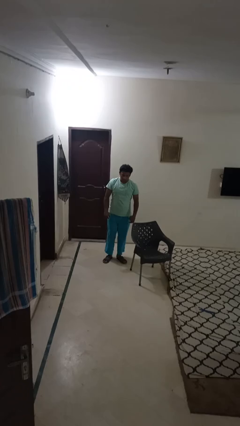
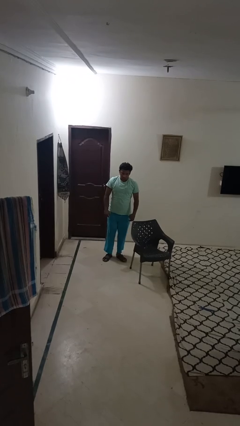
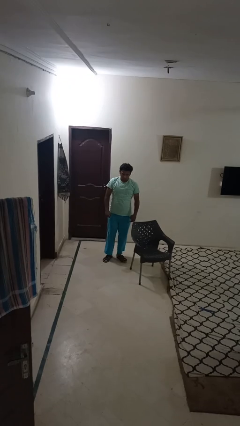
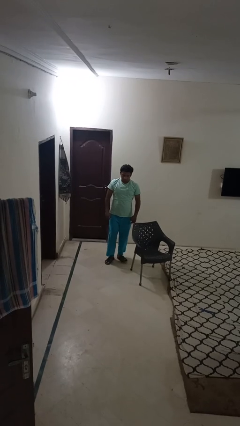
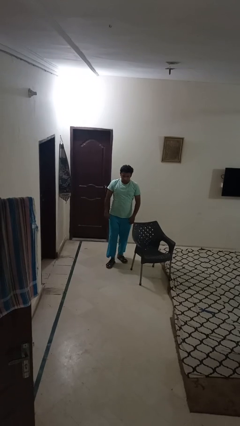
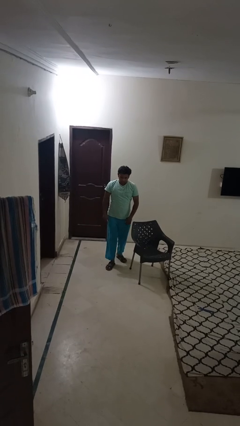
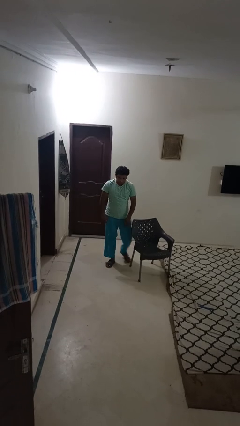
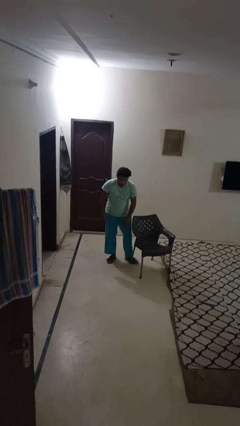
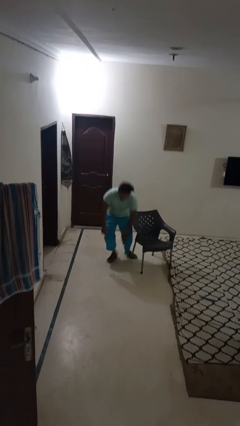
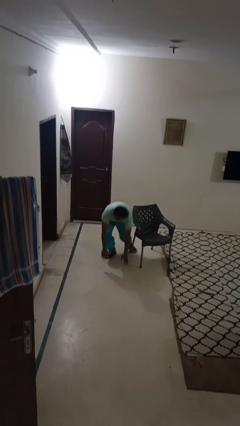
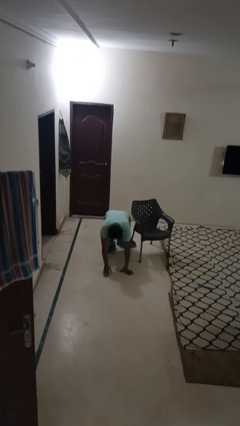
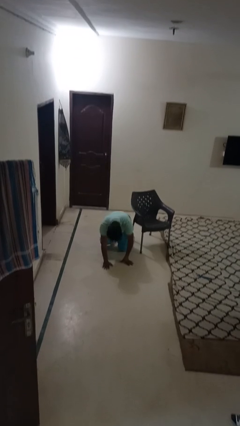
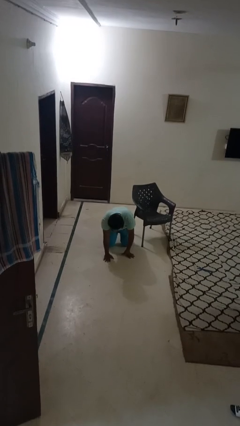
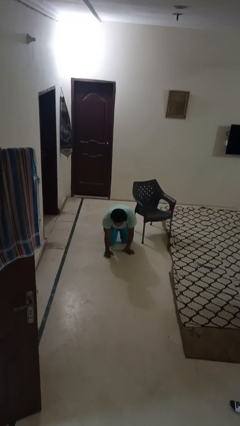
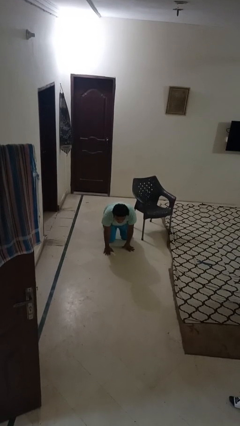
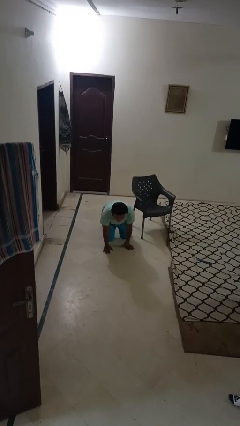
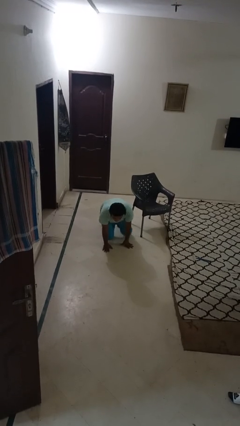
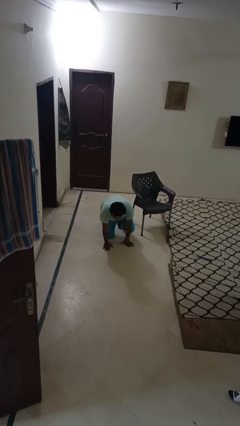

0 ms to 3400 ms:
person trips on object on floor

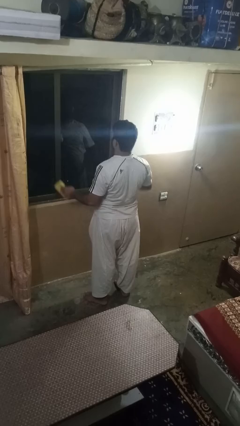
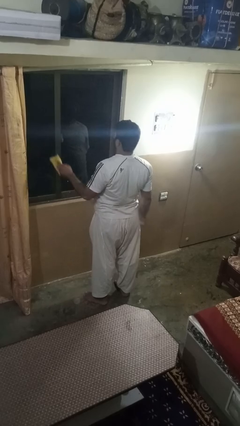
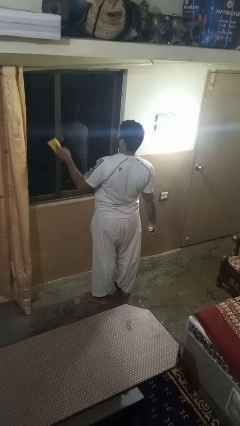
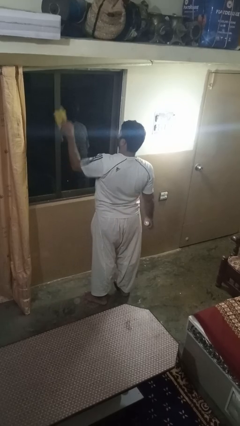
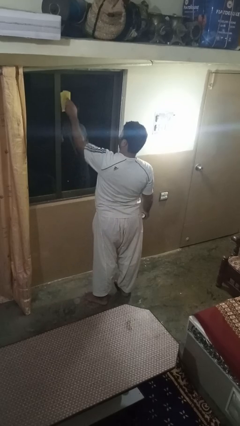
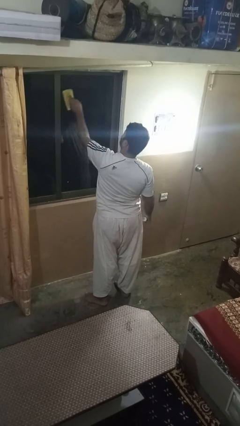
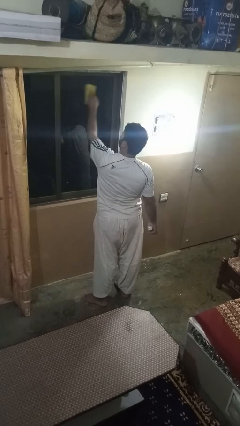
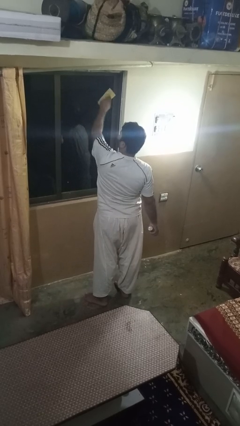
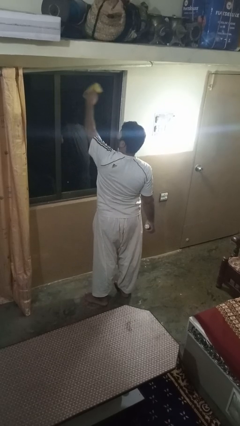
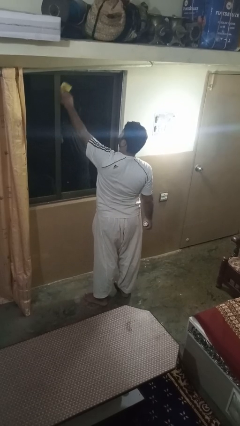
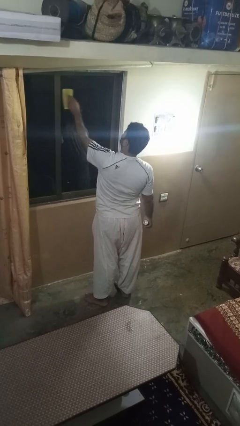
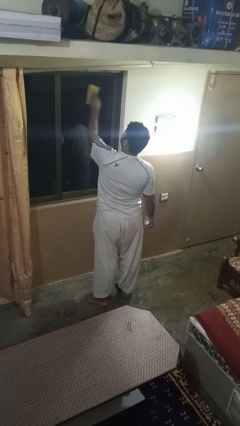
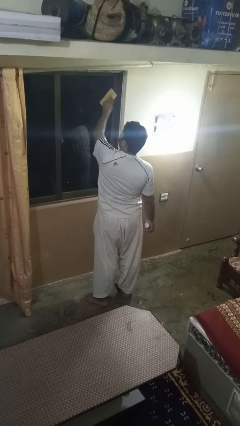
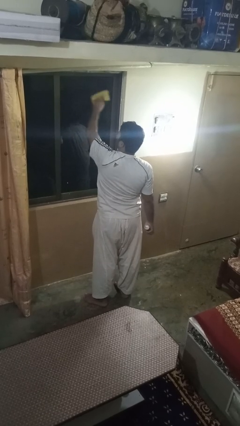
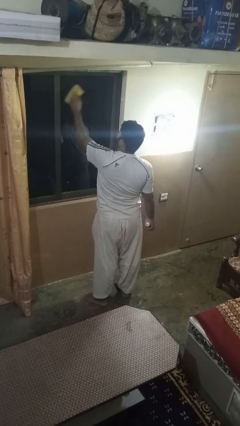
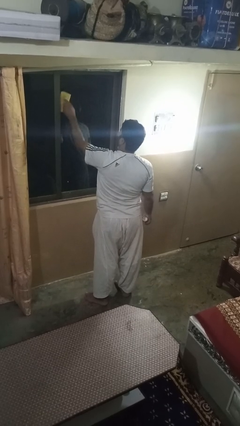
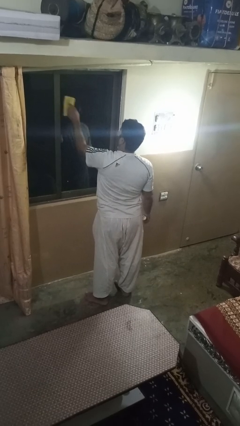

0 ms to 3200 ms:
person washes window

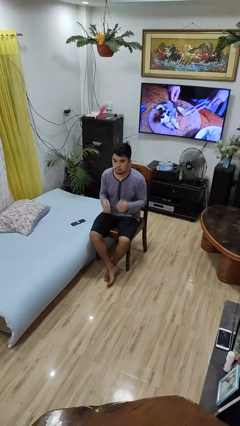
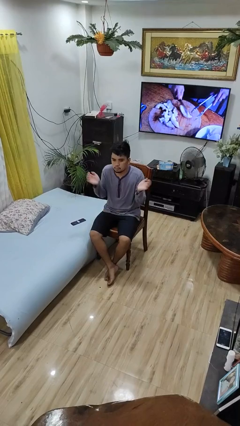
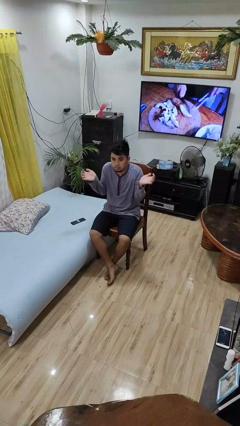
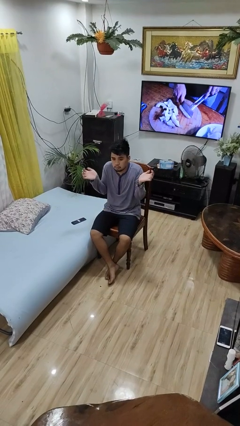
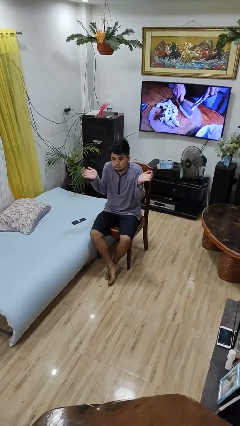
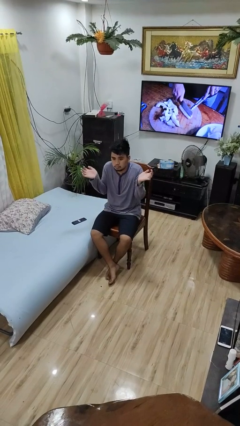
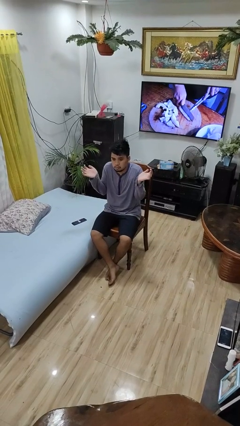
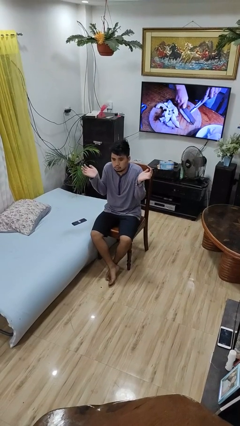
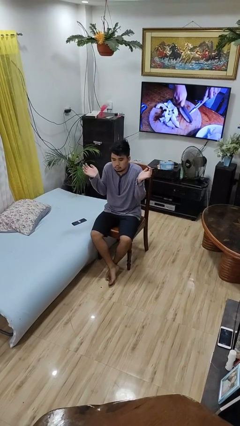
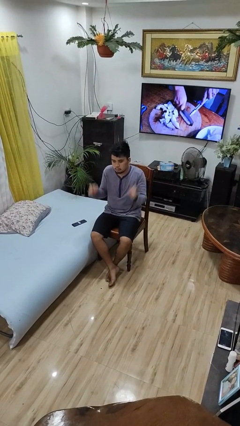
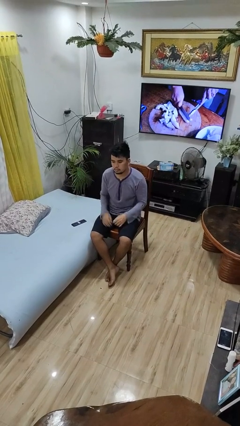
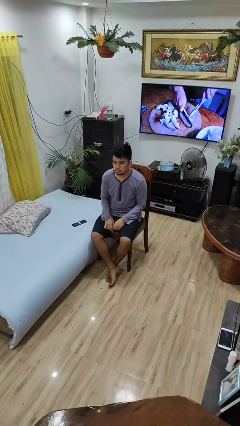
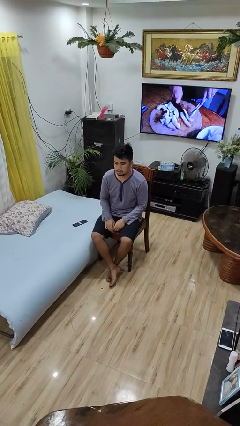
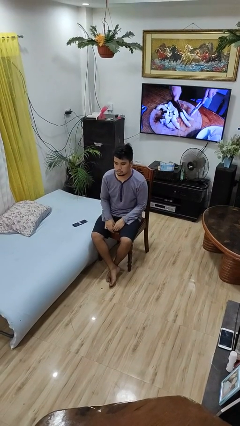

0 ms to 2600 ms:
person shrugs

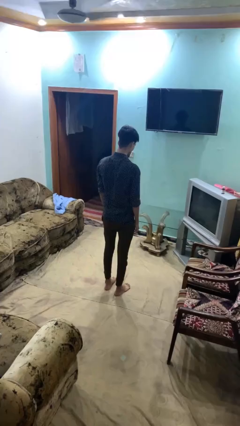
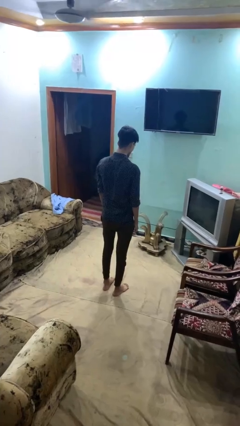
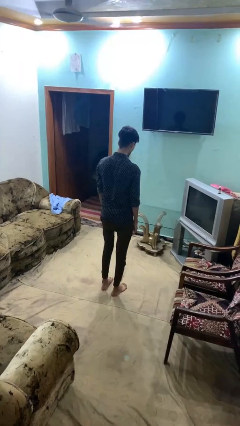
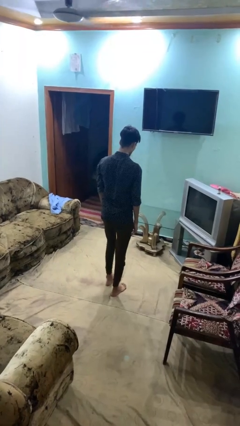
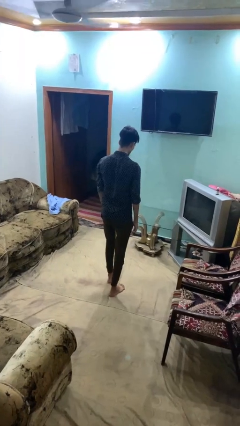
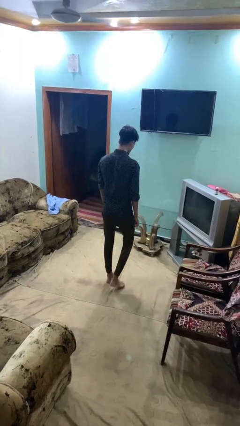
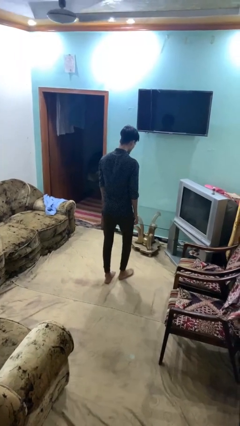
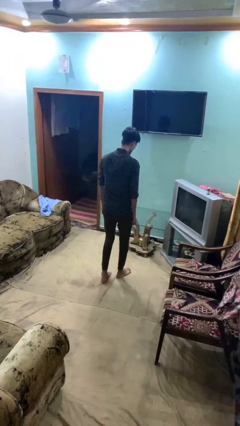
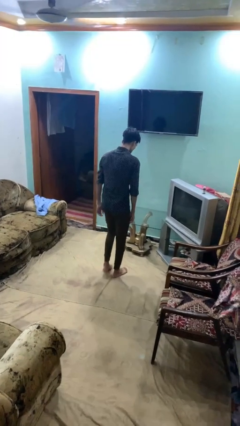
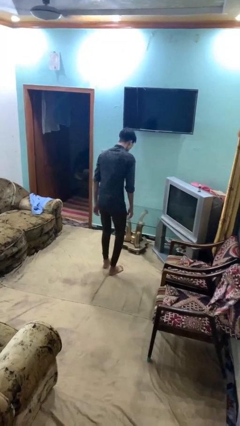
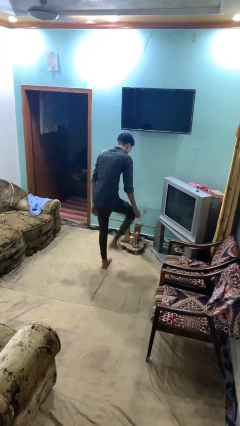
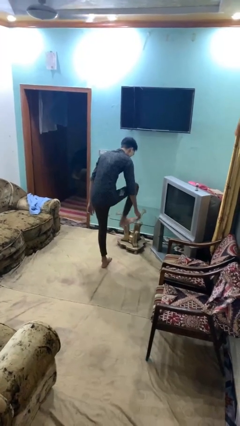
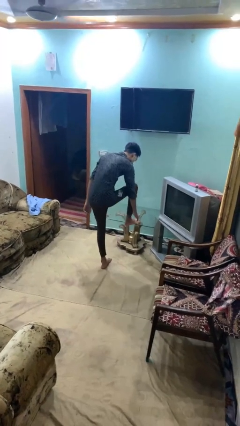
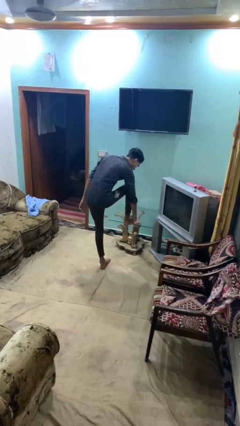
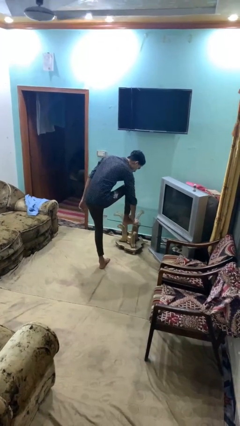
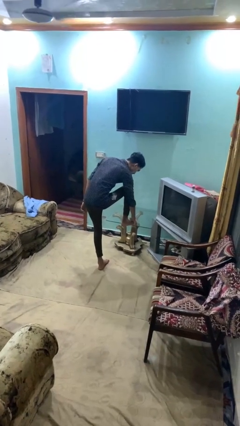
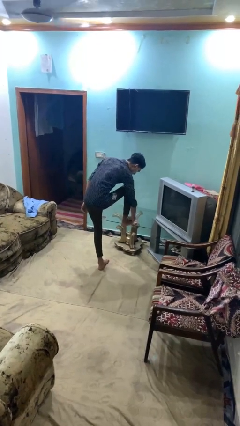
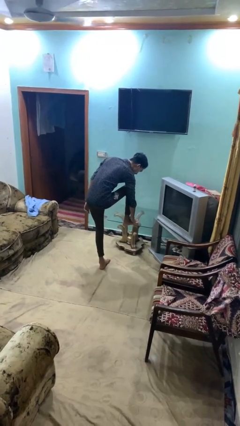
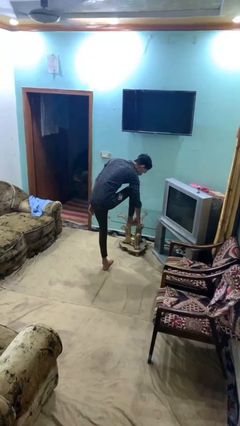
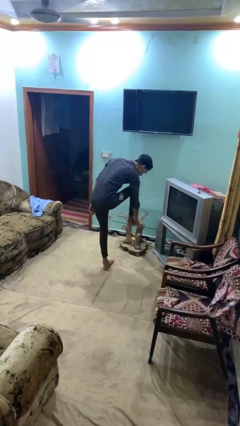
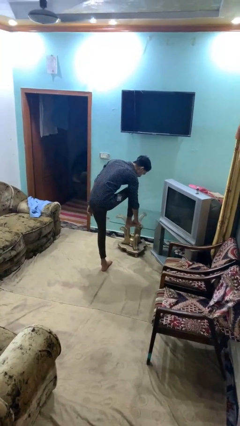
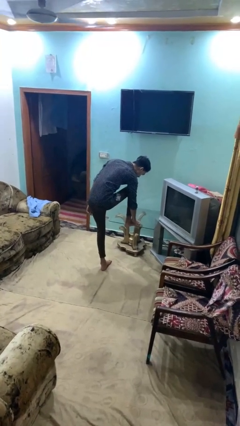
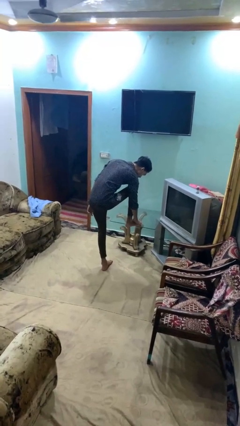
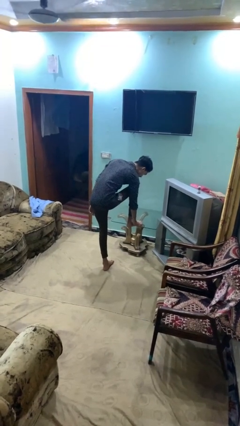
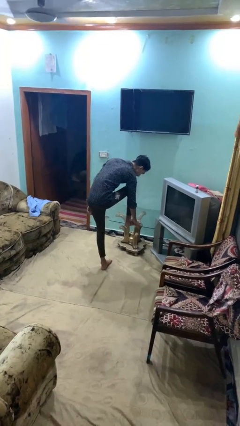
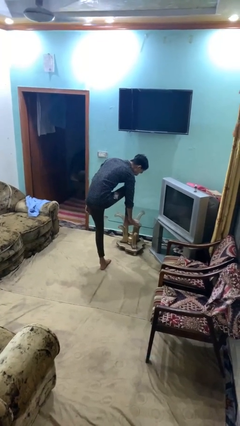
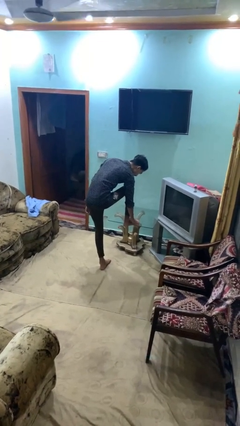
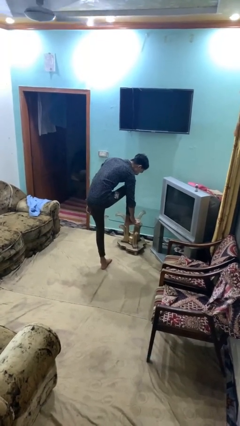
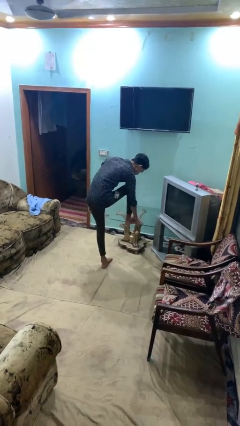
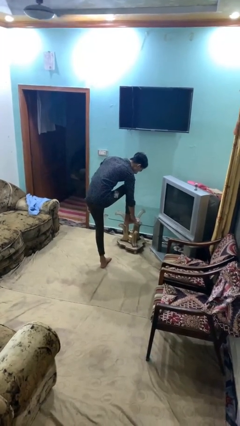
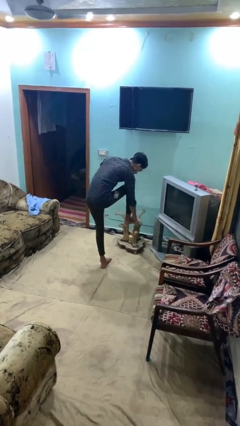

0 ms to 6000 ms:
person stubs toe

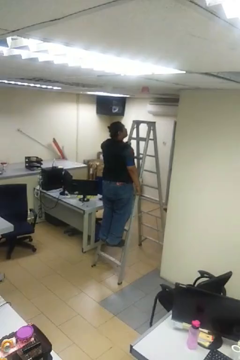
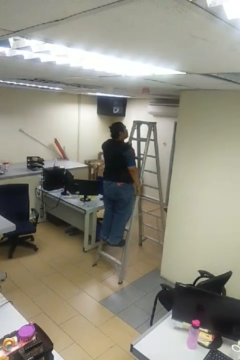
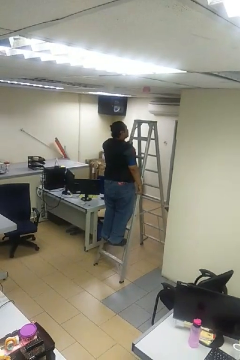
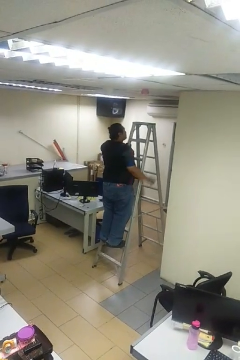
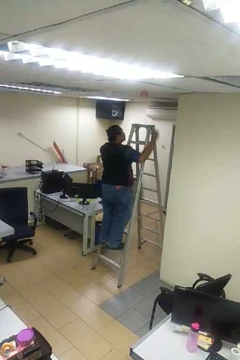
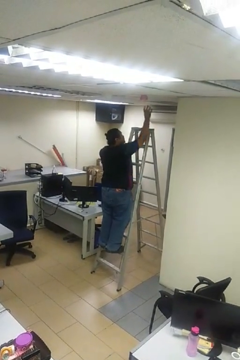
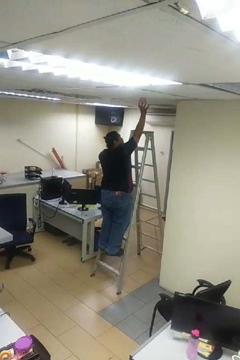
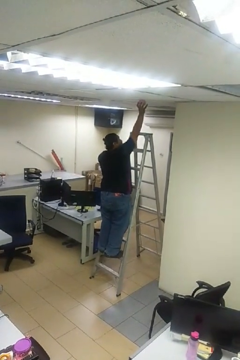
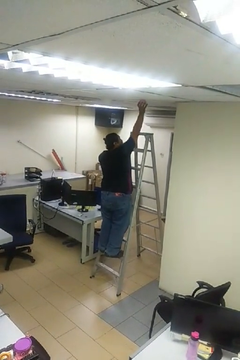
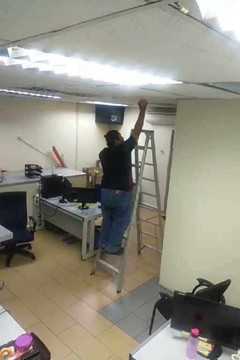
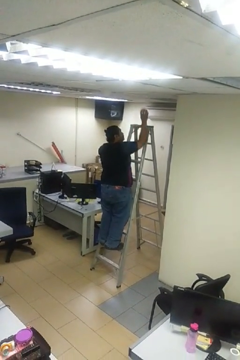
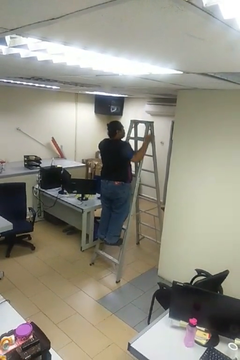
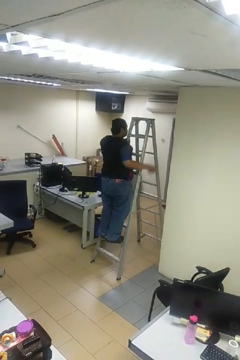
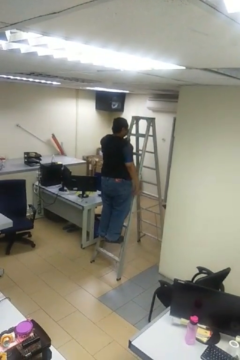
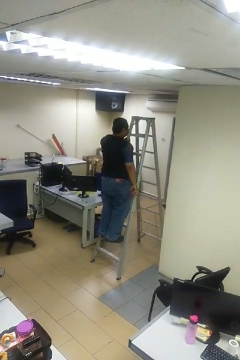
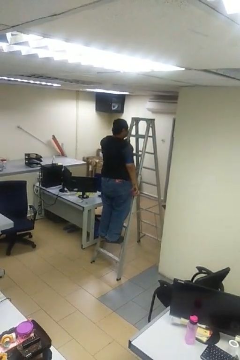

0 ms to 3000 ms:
person takes down smoke detector
